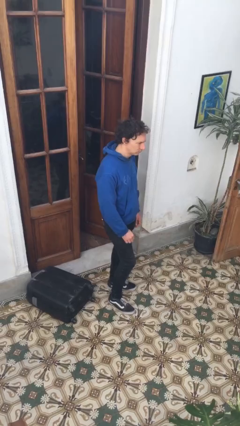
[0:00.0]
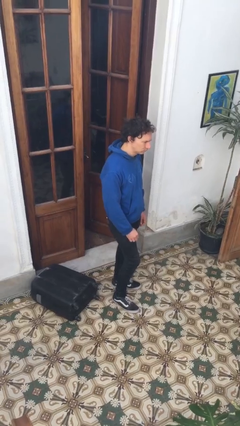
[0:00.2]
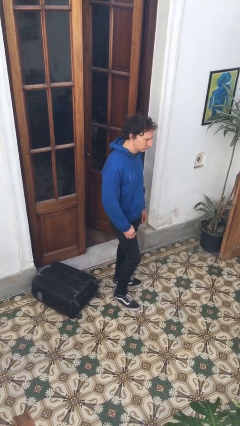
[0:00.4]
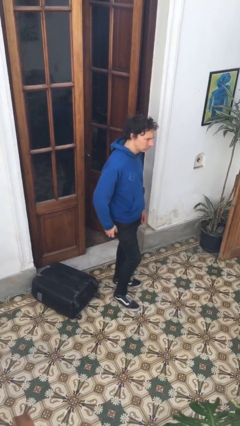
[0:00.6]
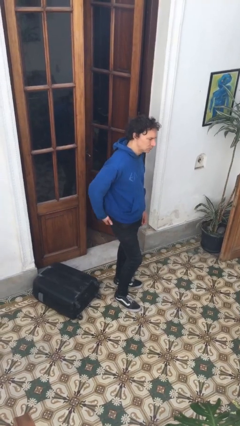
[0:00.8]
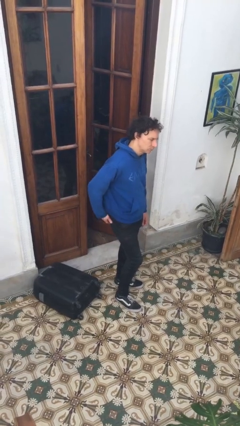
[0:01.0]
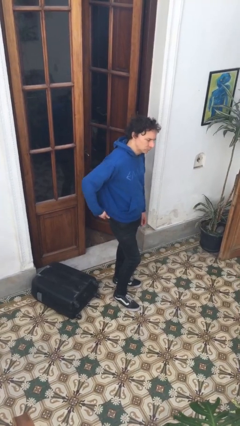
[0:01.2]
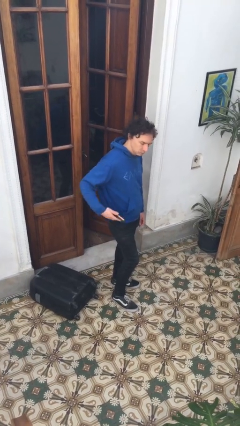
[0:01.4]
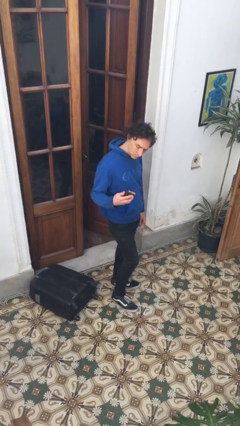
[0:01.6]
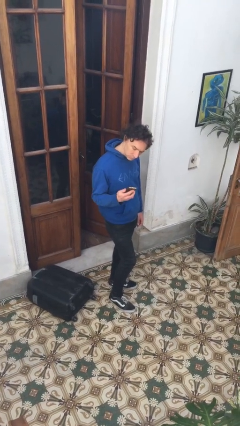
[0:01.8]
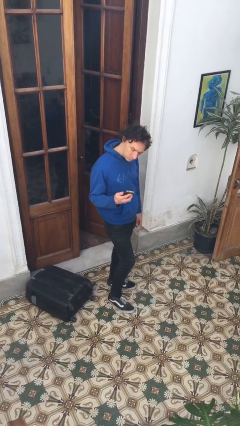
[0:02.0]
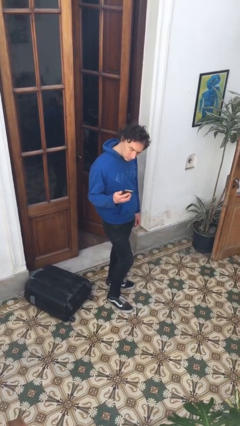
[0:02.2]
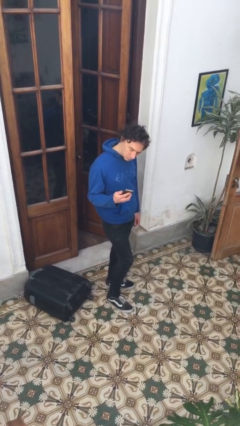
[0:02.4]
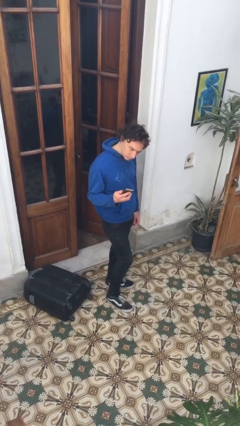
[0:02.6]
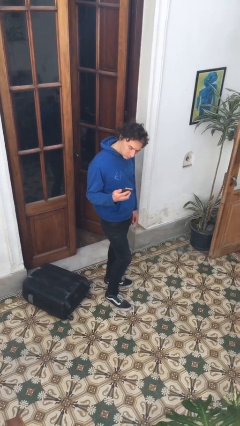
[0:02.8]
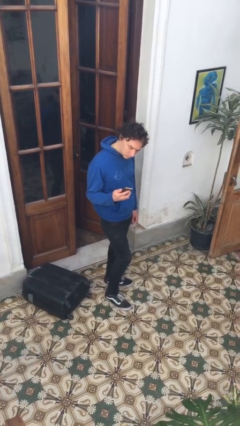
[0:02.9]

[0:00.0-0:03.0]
person takes phone from pocket

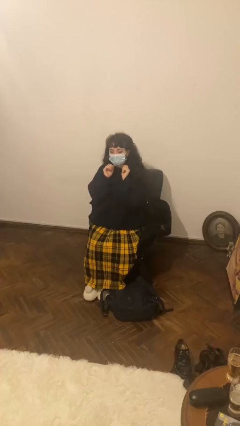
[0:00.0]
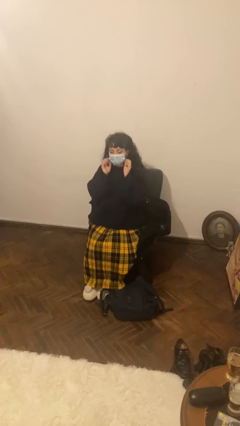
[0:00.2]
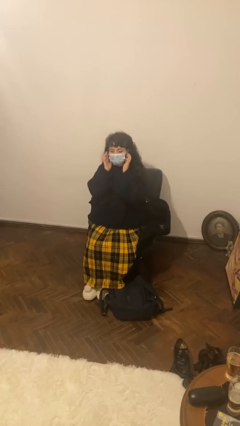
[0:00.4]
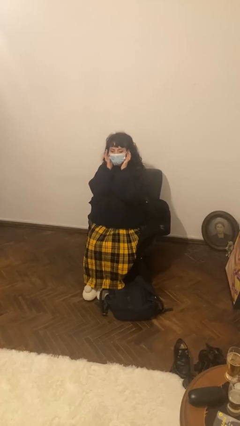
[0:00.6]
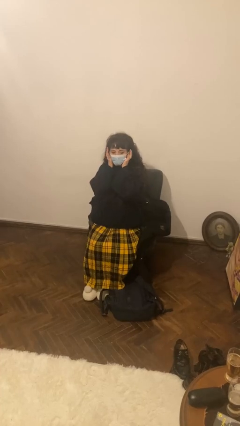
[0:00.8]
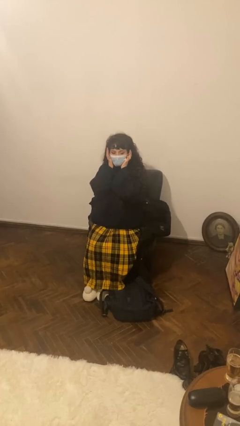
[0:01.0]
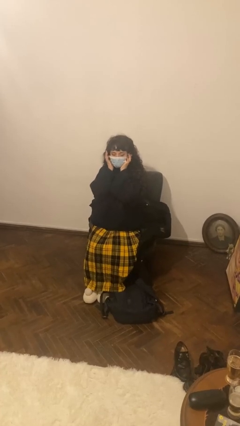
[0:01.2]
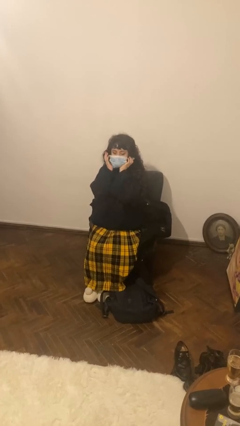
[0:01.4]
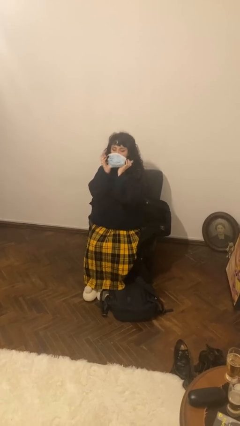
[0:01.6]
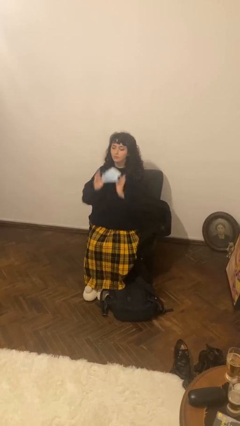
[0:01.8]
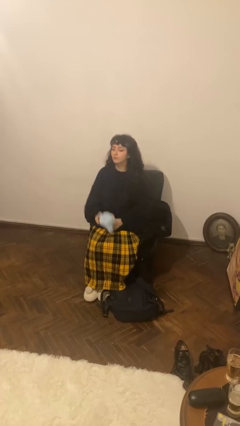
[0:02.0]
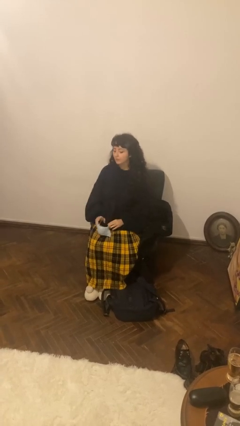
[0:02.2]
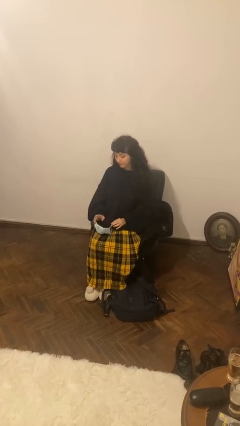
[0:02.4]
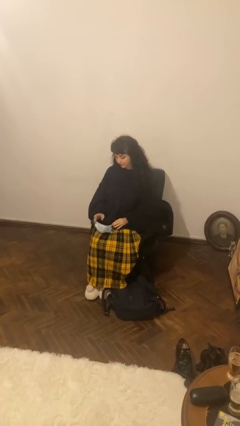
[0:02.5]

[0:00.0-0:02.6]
person takes off facemask

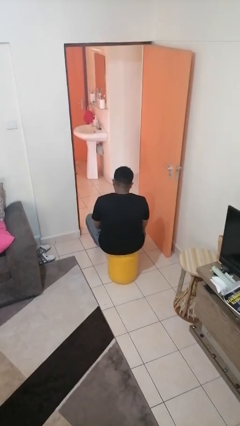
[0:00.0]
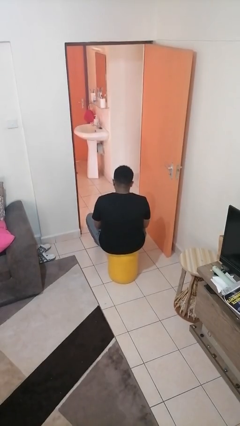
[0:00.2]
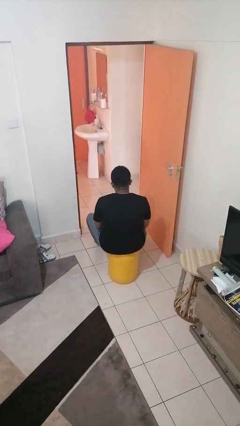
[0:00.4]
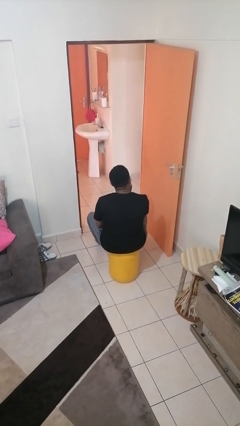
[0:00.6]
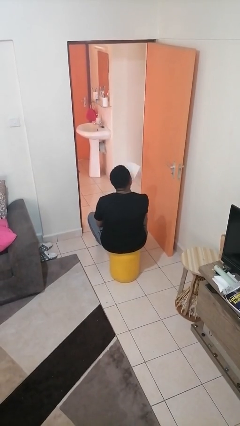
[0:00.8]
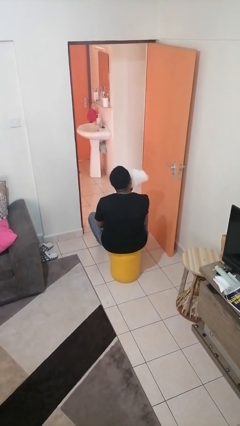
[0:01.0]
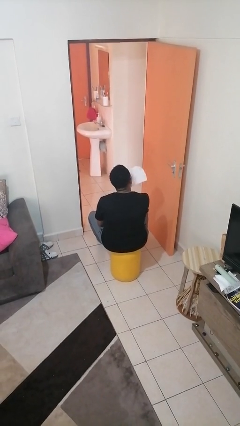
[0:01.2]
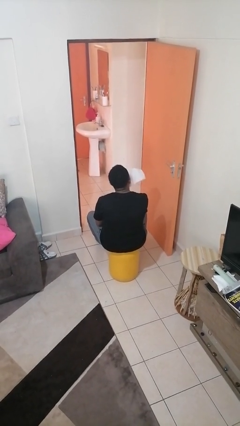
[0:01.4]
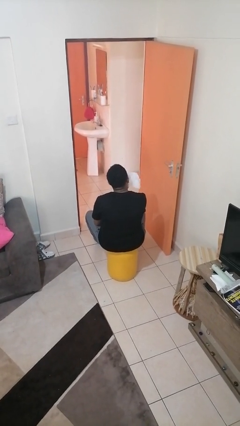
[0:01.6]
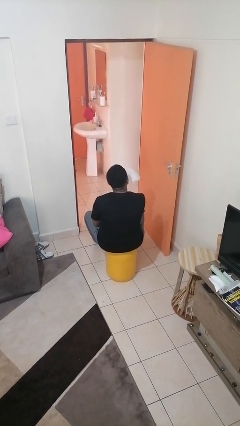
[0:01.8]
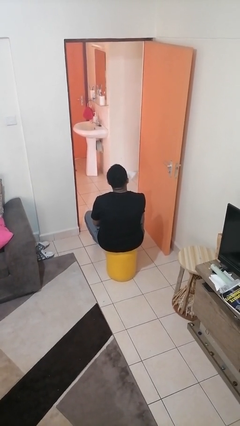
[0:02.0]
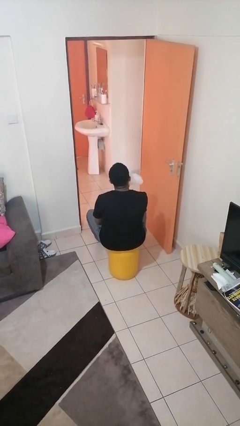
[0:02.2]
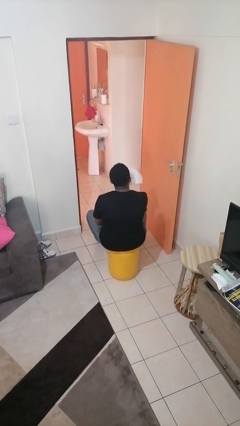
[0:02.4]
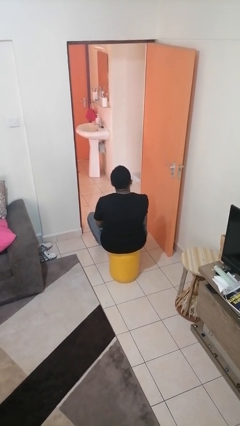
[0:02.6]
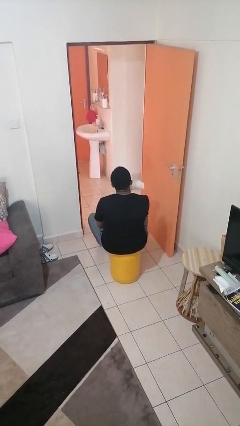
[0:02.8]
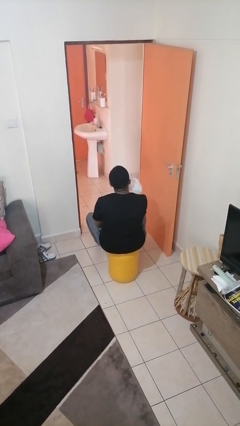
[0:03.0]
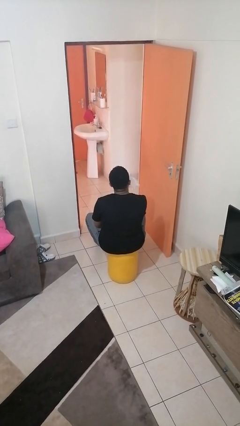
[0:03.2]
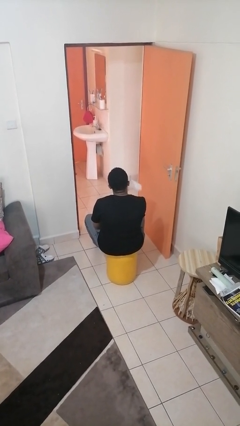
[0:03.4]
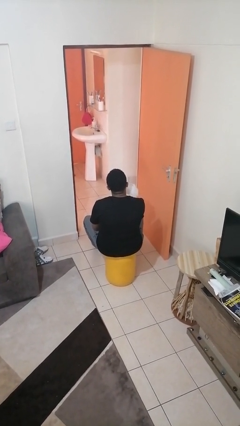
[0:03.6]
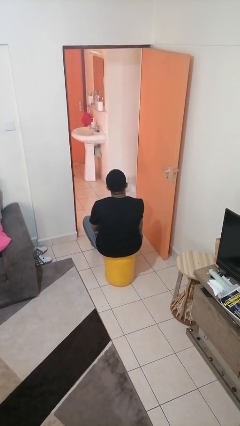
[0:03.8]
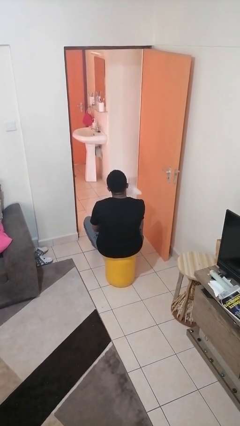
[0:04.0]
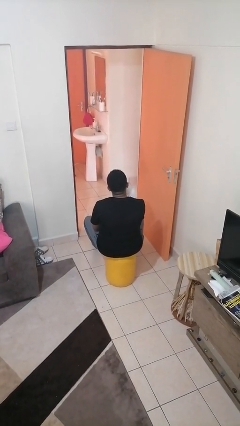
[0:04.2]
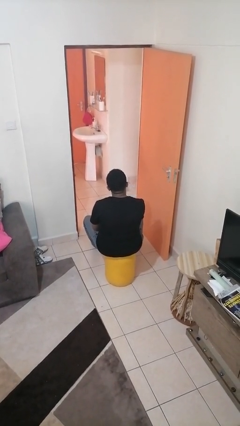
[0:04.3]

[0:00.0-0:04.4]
person wipes mouth with napkin

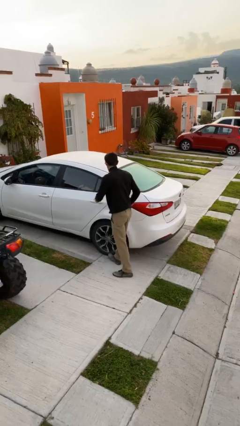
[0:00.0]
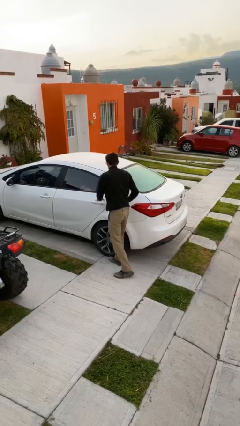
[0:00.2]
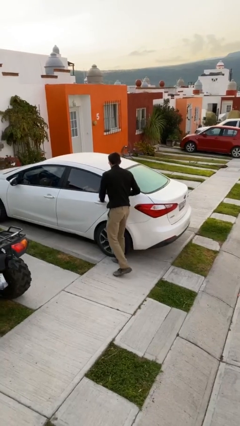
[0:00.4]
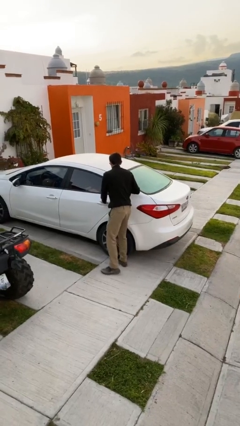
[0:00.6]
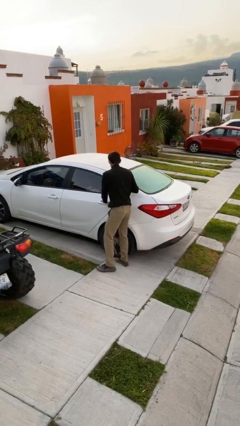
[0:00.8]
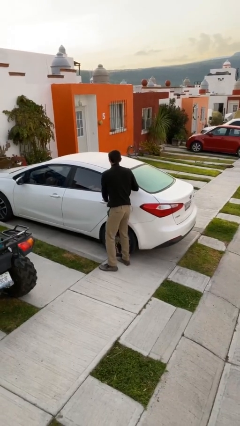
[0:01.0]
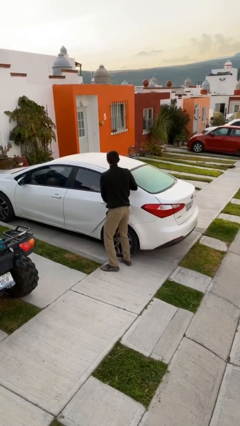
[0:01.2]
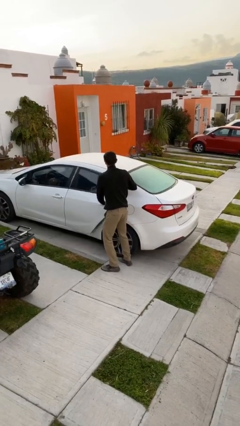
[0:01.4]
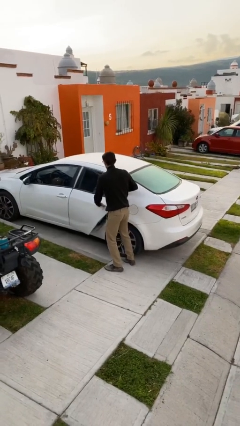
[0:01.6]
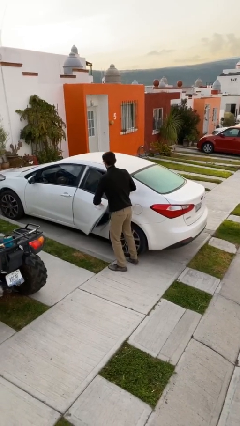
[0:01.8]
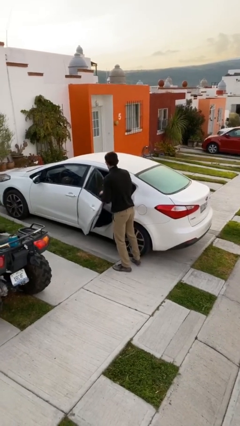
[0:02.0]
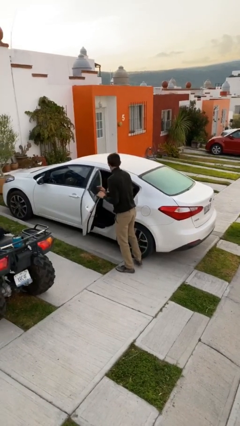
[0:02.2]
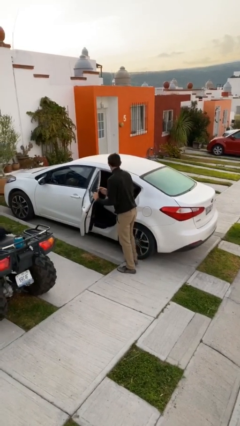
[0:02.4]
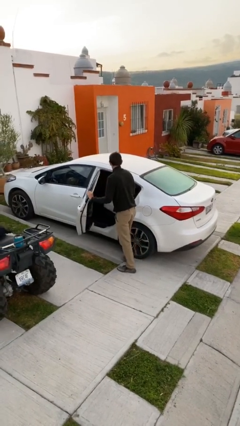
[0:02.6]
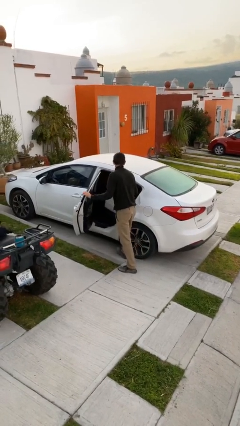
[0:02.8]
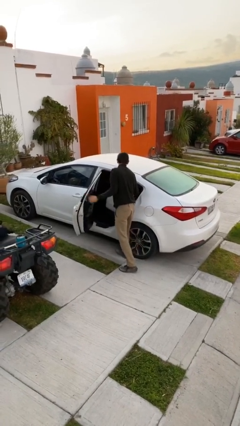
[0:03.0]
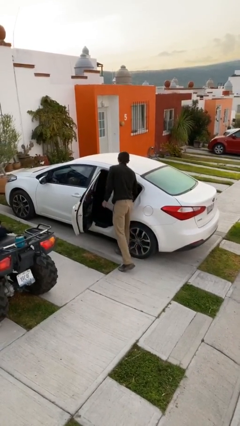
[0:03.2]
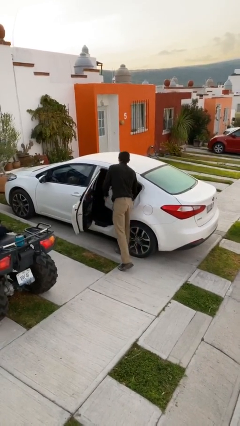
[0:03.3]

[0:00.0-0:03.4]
person opens car door

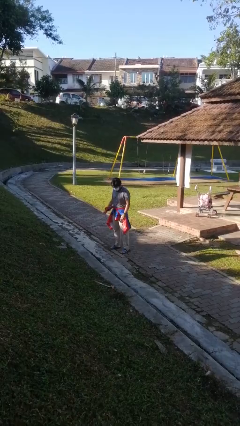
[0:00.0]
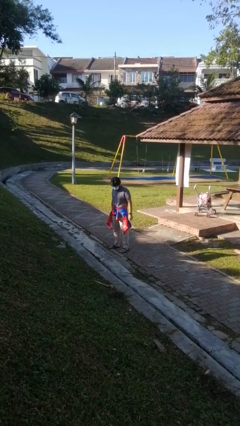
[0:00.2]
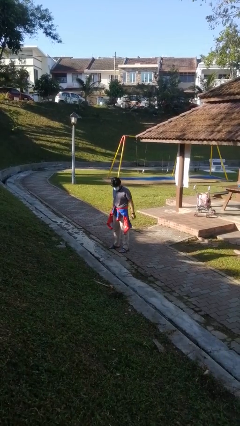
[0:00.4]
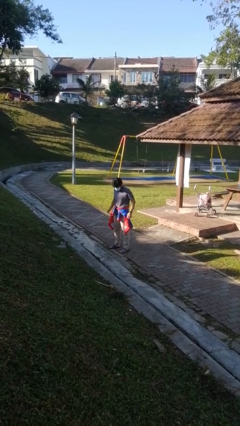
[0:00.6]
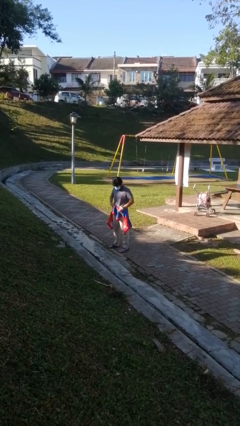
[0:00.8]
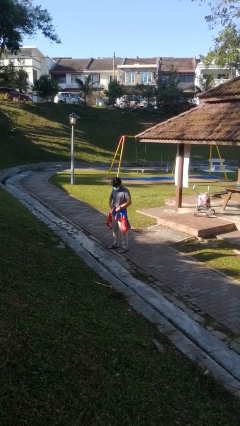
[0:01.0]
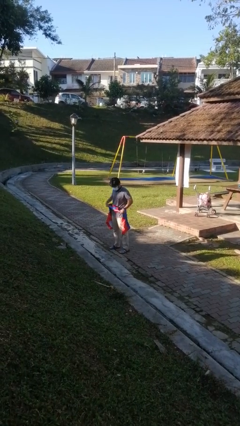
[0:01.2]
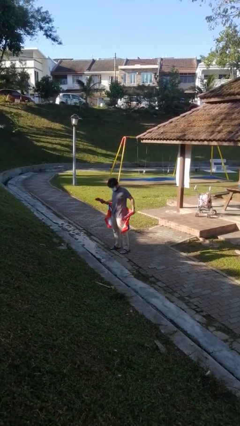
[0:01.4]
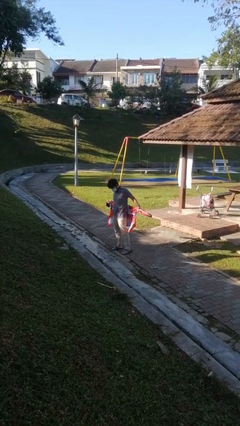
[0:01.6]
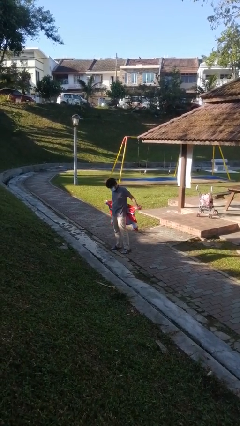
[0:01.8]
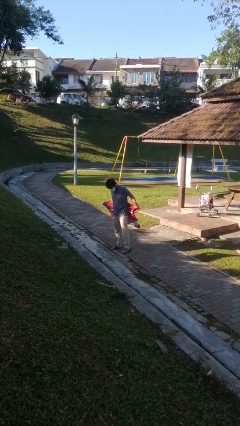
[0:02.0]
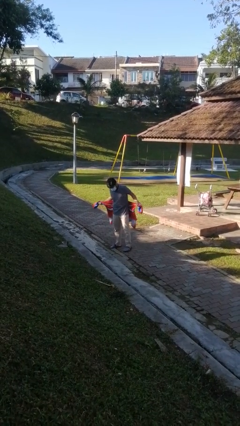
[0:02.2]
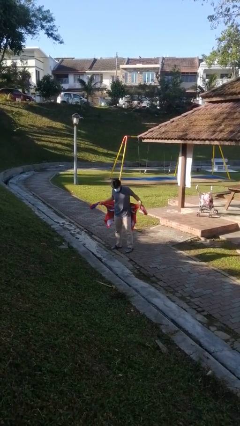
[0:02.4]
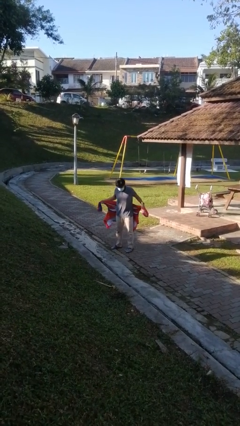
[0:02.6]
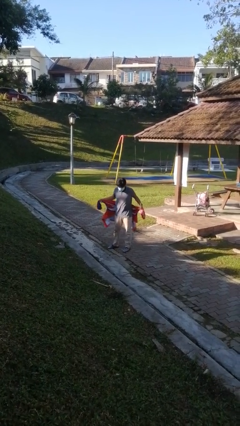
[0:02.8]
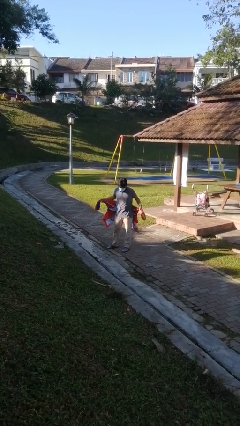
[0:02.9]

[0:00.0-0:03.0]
person unties jacket around waist

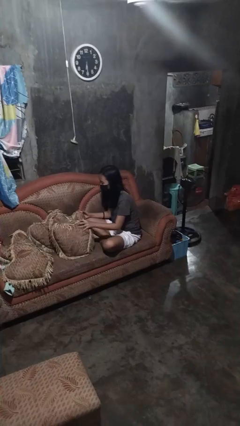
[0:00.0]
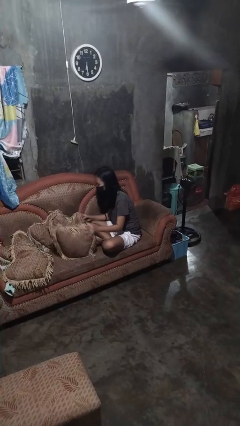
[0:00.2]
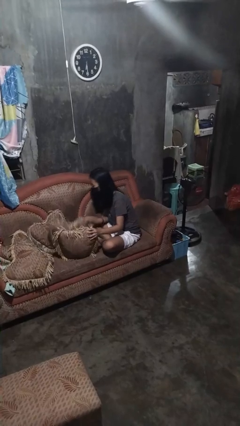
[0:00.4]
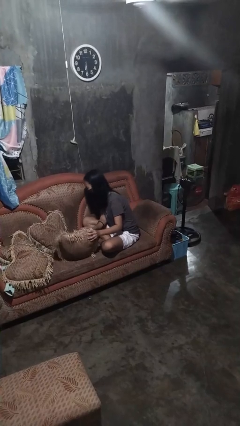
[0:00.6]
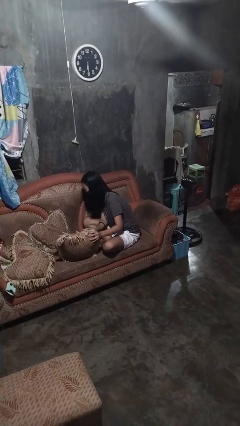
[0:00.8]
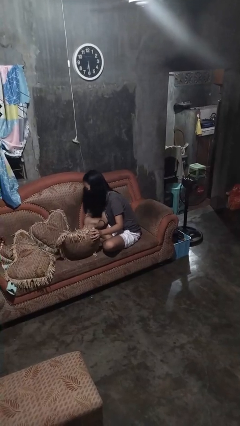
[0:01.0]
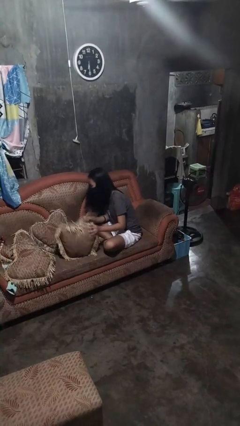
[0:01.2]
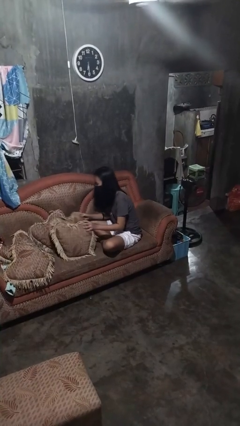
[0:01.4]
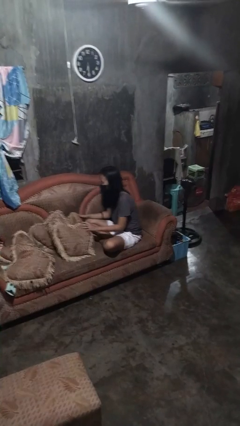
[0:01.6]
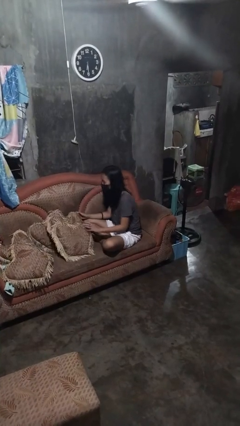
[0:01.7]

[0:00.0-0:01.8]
person searches in couch
